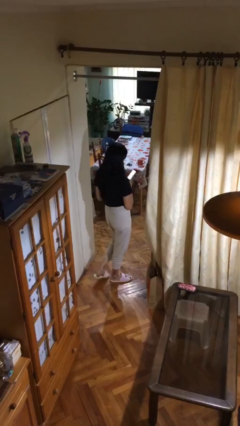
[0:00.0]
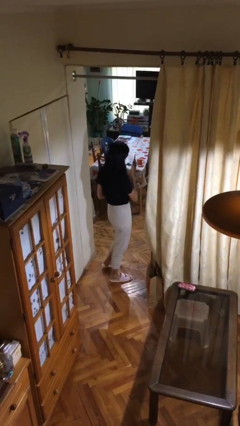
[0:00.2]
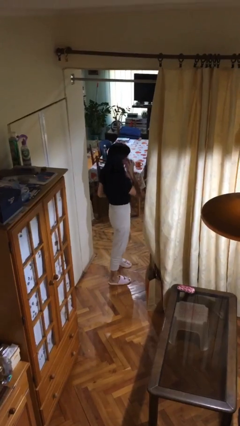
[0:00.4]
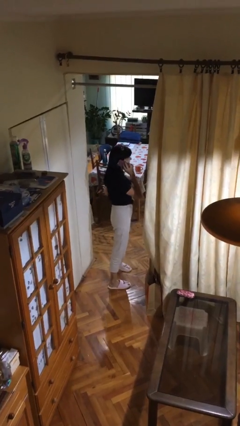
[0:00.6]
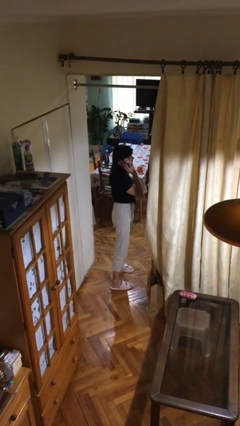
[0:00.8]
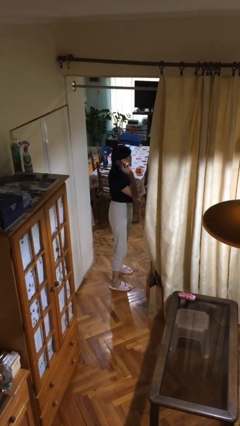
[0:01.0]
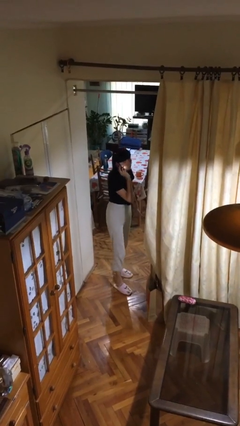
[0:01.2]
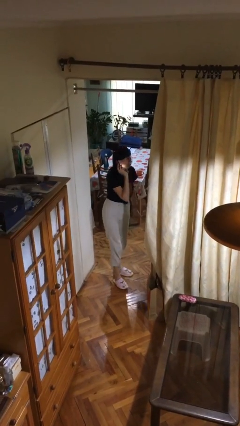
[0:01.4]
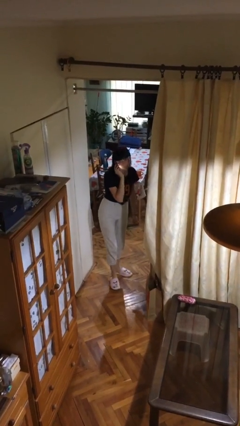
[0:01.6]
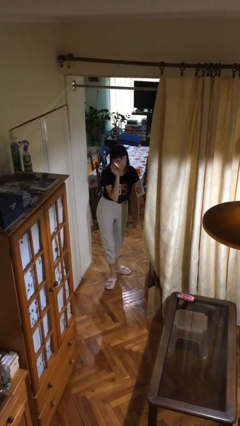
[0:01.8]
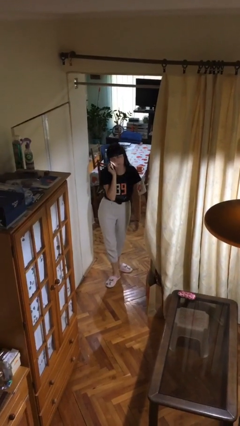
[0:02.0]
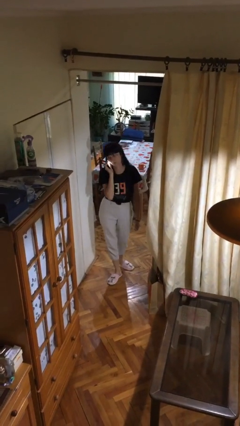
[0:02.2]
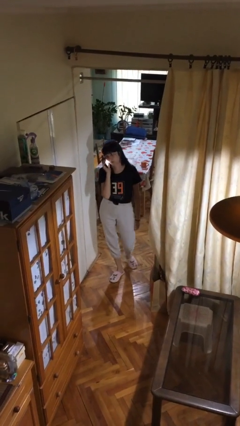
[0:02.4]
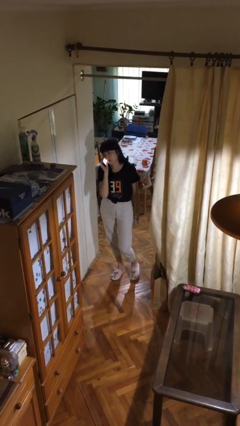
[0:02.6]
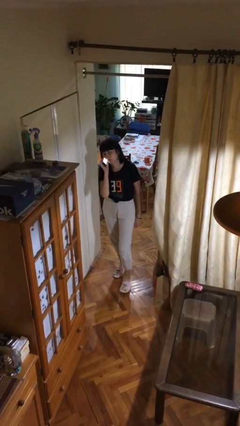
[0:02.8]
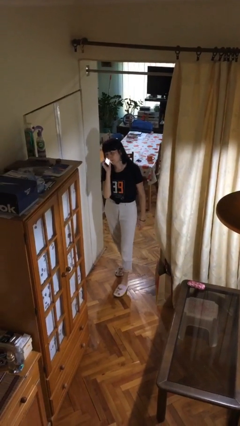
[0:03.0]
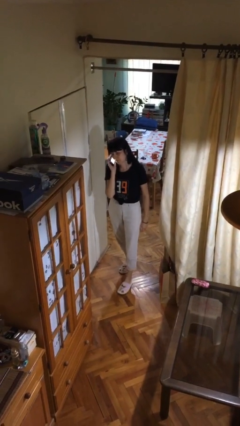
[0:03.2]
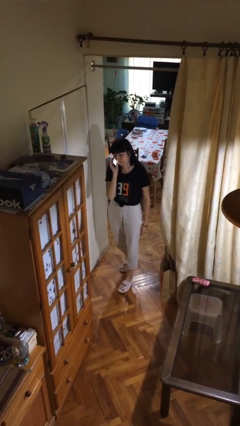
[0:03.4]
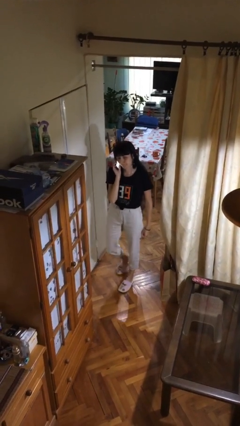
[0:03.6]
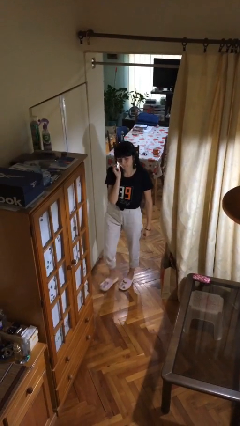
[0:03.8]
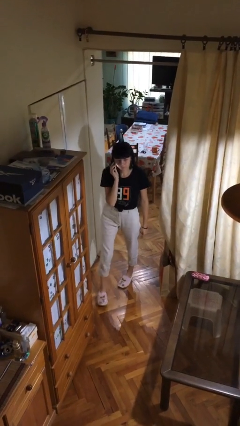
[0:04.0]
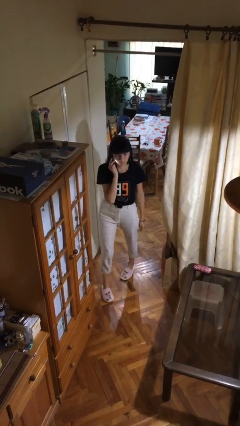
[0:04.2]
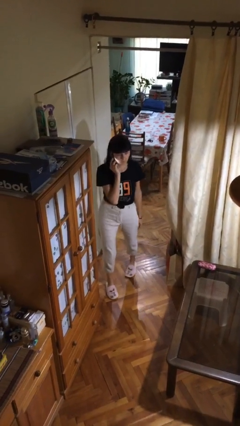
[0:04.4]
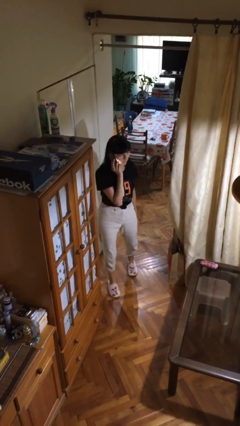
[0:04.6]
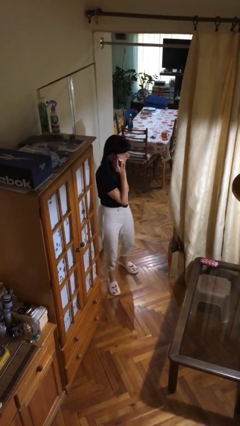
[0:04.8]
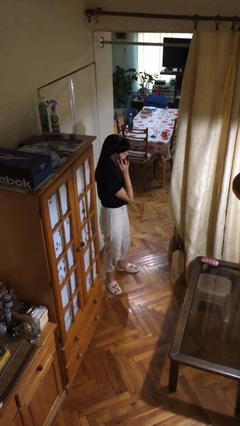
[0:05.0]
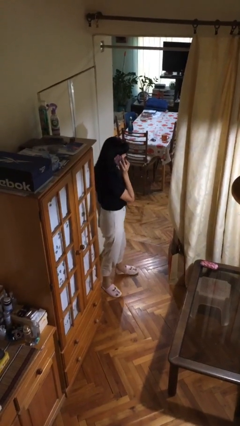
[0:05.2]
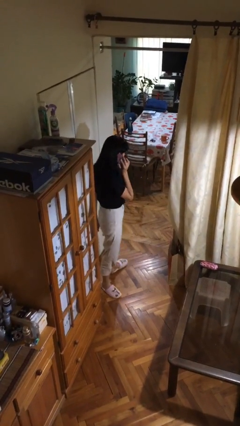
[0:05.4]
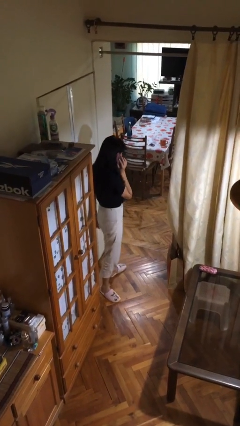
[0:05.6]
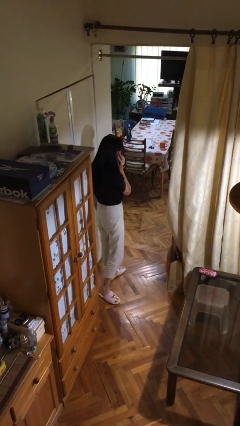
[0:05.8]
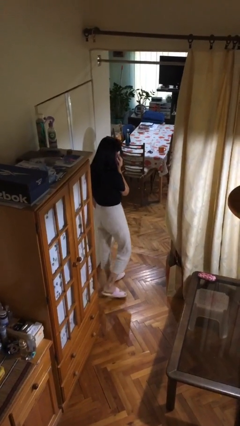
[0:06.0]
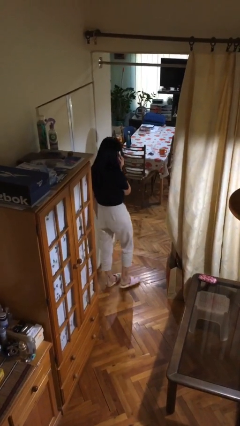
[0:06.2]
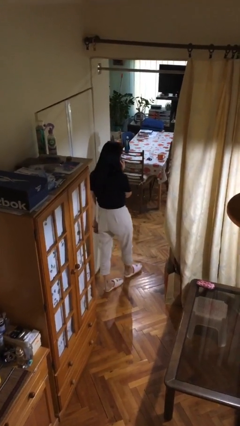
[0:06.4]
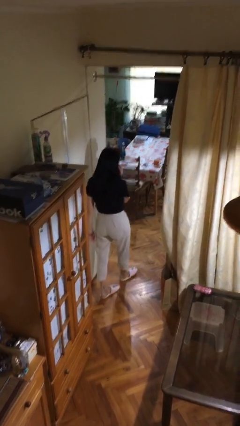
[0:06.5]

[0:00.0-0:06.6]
person talks on phone

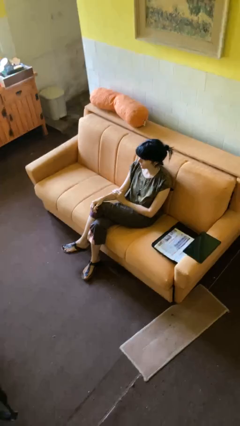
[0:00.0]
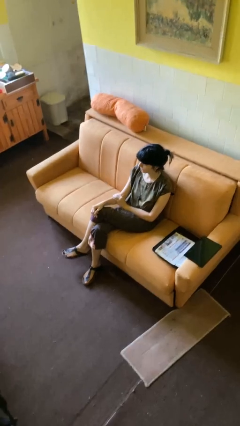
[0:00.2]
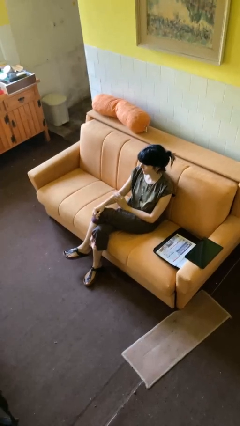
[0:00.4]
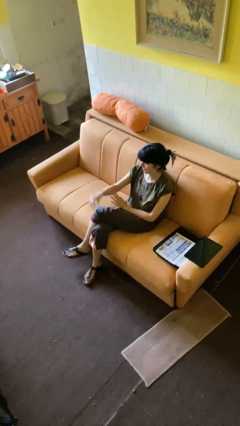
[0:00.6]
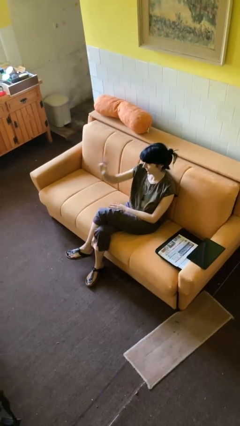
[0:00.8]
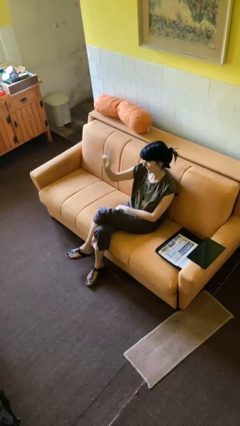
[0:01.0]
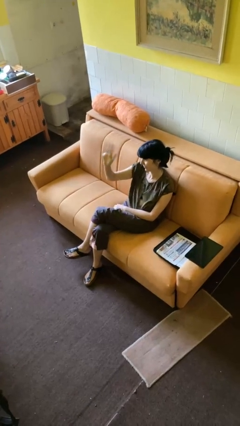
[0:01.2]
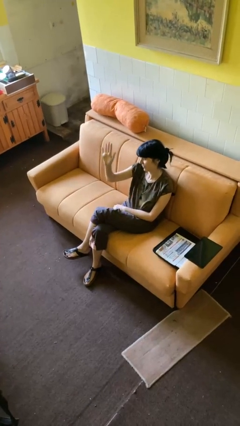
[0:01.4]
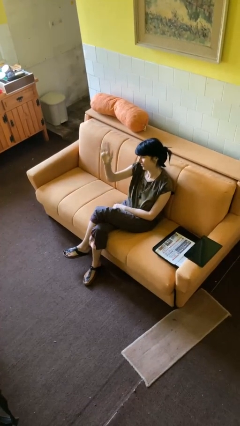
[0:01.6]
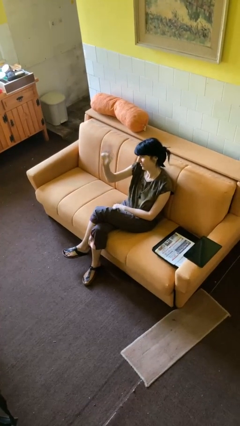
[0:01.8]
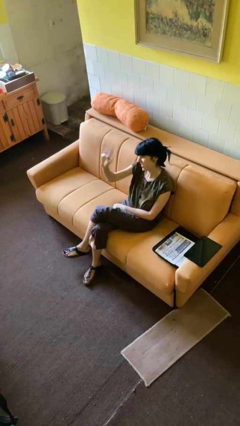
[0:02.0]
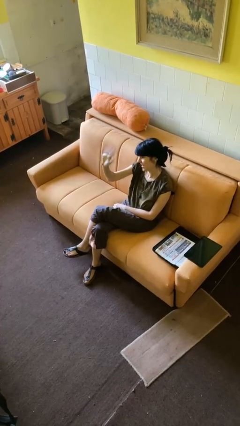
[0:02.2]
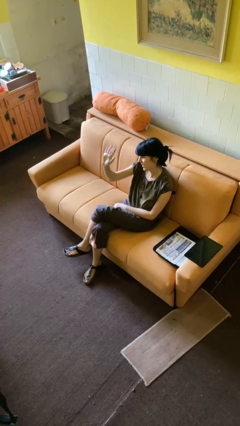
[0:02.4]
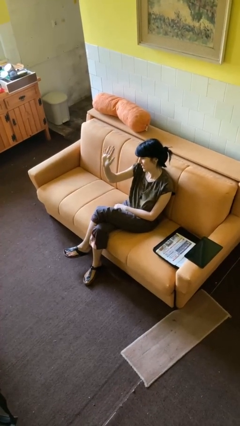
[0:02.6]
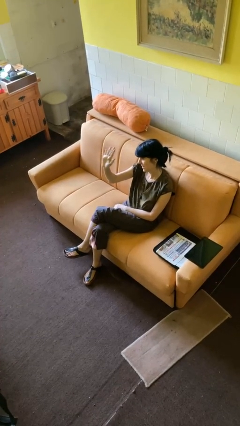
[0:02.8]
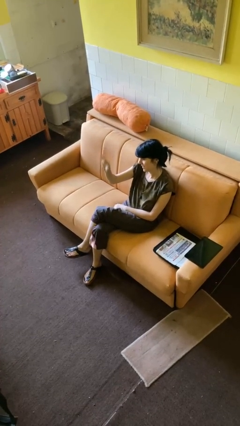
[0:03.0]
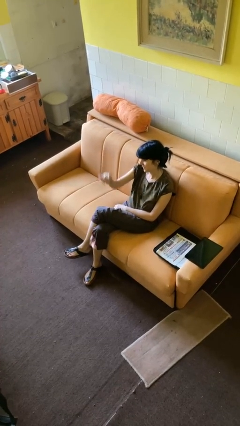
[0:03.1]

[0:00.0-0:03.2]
person waves at person

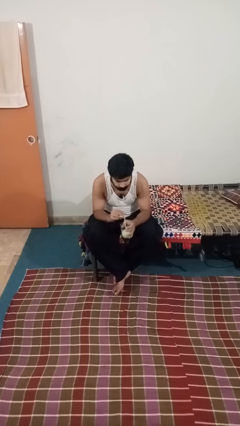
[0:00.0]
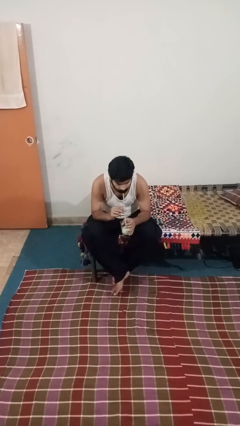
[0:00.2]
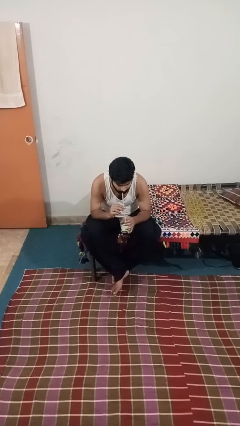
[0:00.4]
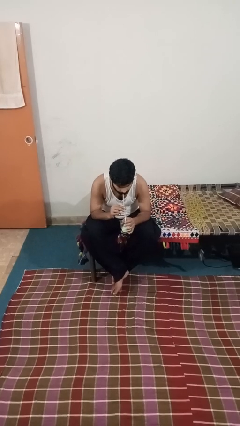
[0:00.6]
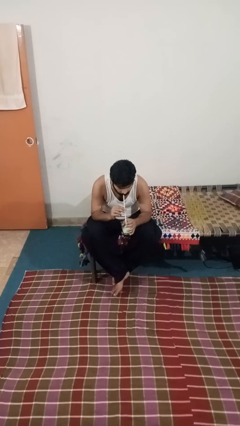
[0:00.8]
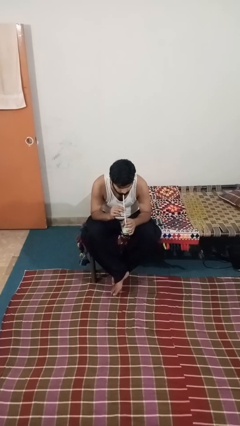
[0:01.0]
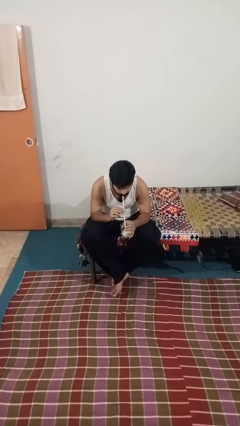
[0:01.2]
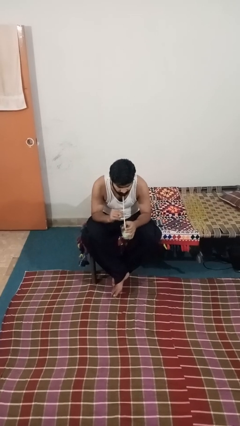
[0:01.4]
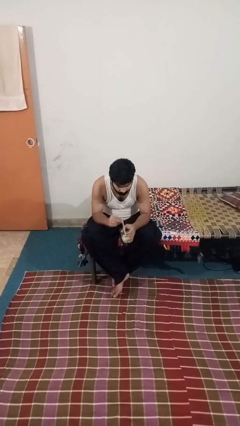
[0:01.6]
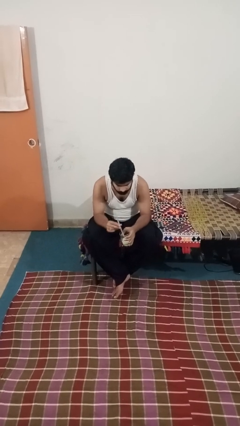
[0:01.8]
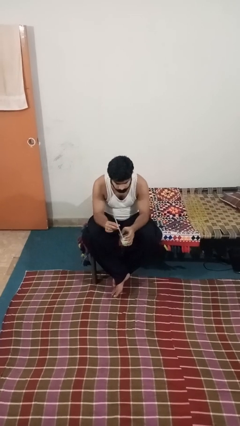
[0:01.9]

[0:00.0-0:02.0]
person drinks from straw

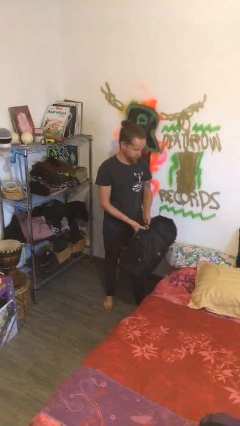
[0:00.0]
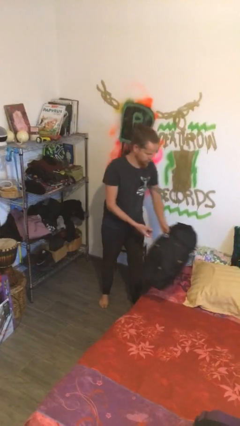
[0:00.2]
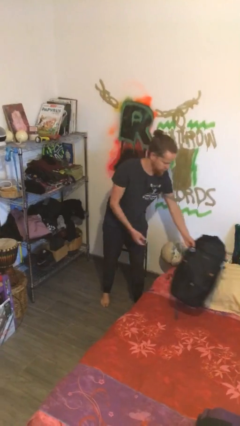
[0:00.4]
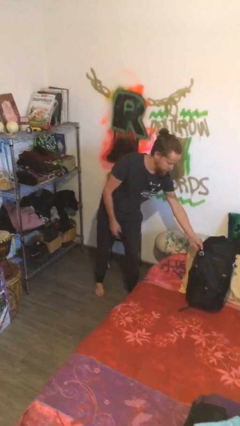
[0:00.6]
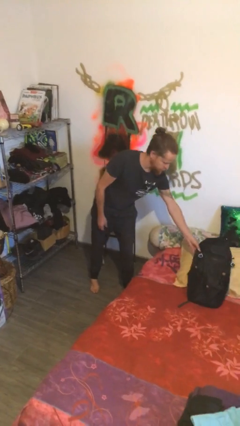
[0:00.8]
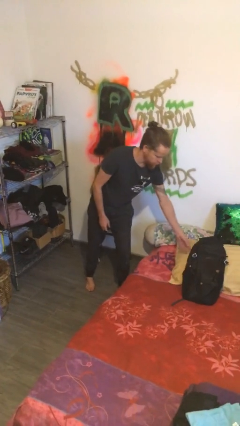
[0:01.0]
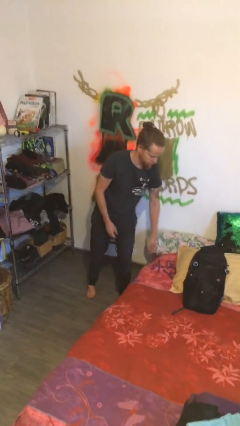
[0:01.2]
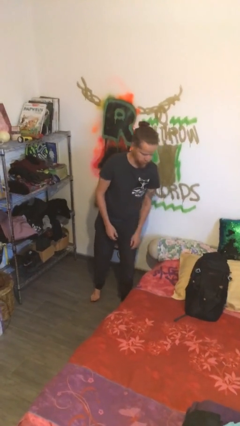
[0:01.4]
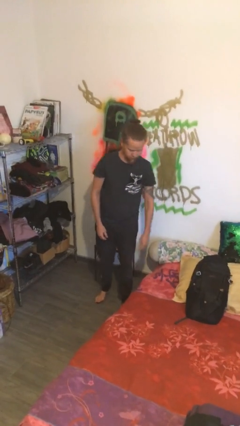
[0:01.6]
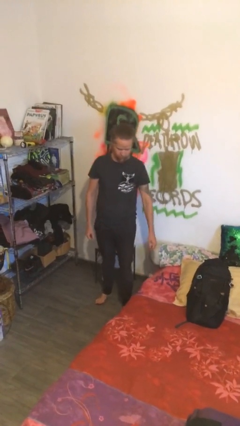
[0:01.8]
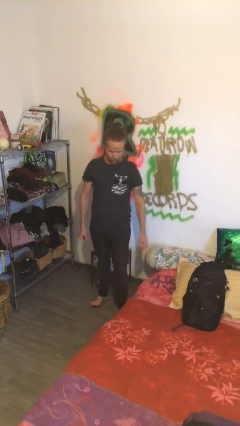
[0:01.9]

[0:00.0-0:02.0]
person puts down object on bed

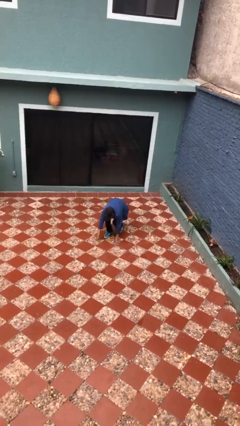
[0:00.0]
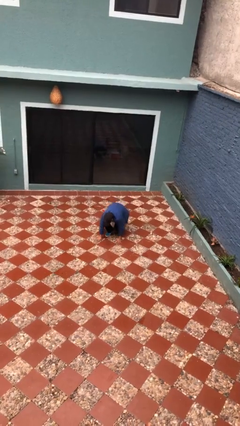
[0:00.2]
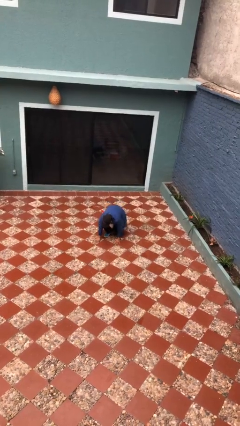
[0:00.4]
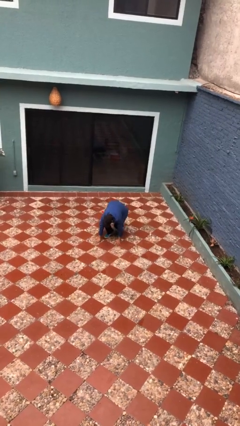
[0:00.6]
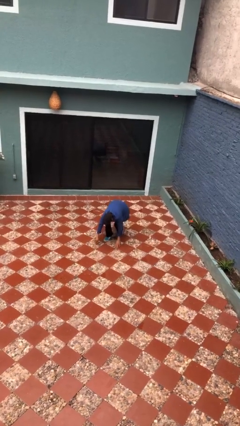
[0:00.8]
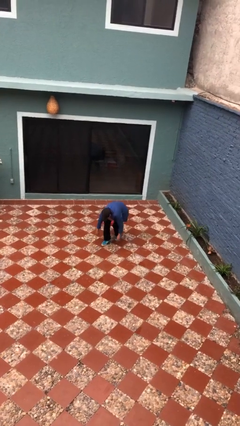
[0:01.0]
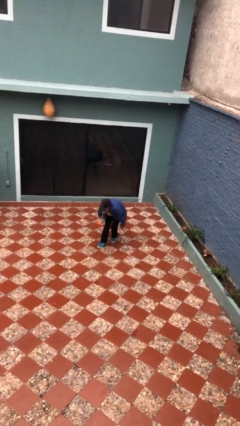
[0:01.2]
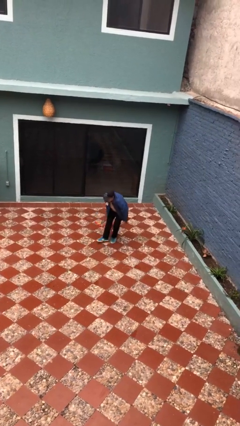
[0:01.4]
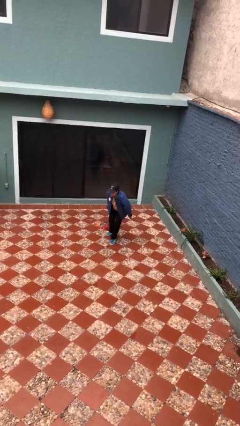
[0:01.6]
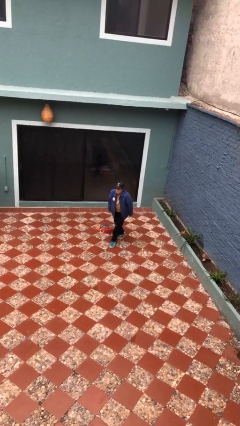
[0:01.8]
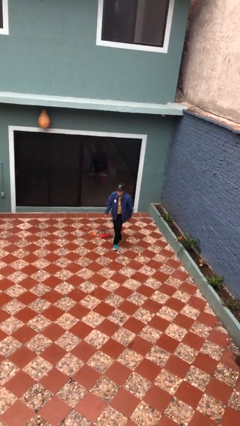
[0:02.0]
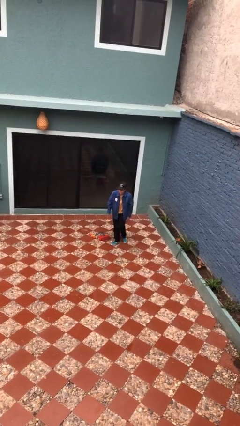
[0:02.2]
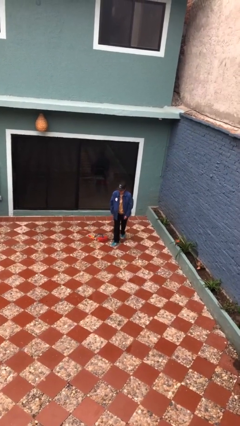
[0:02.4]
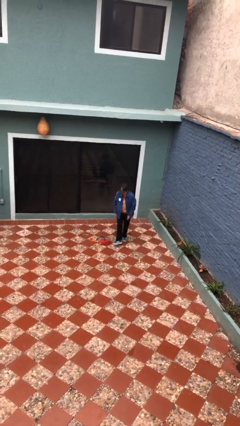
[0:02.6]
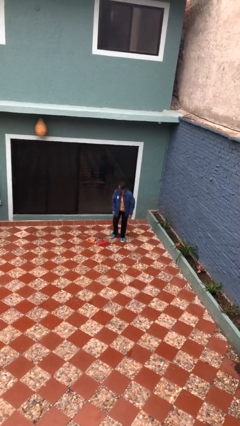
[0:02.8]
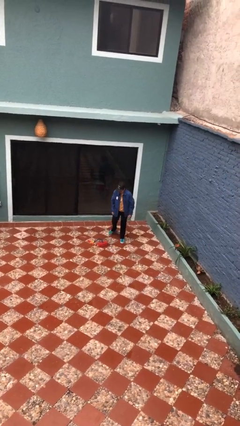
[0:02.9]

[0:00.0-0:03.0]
person stands up from floor

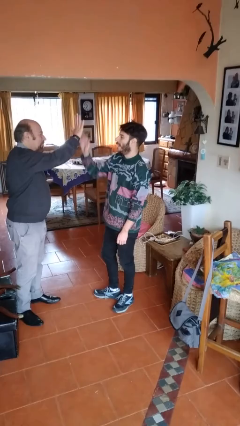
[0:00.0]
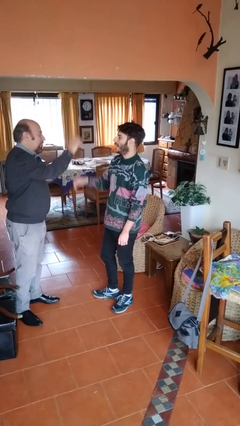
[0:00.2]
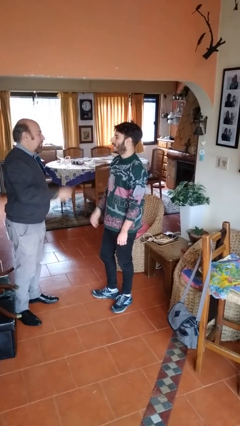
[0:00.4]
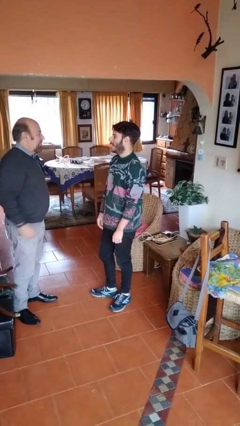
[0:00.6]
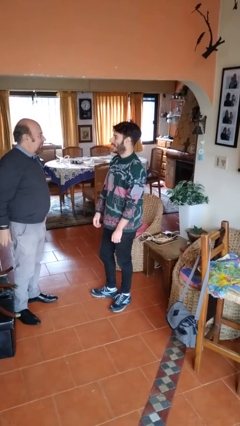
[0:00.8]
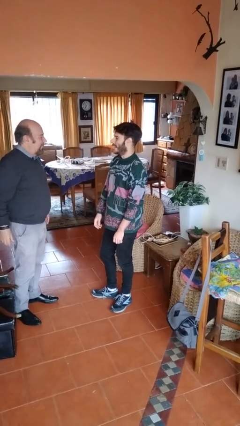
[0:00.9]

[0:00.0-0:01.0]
person highfives hand
